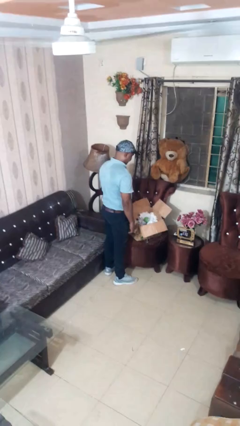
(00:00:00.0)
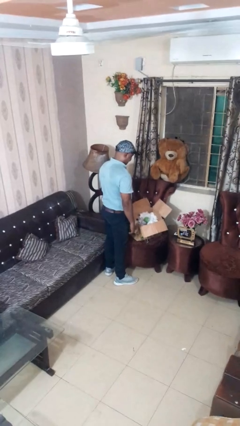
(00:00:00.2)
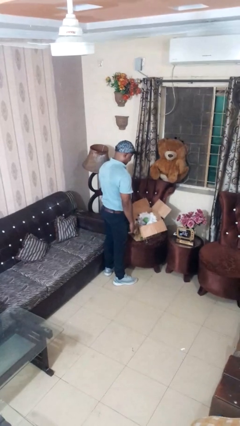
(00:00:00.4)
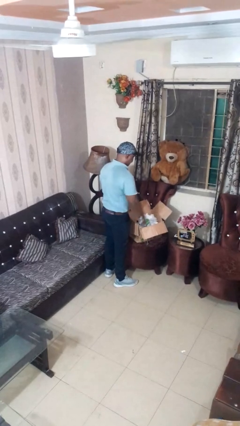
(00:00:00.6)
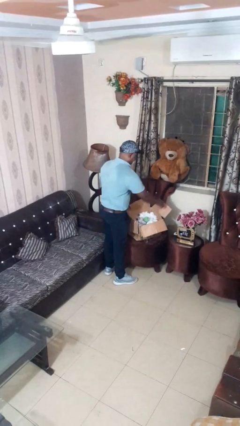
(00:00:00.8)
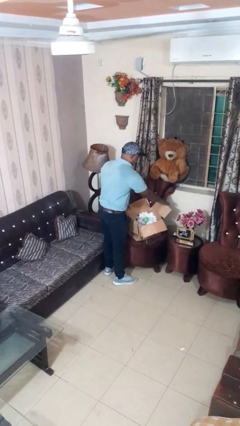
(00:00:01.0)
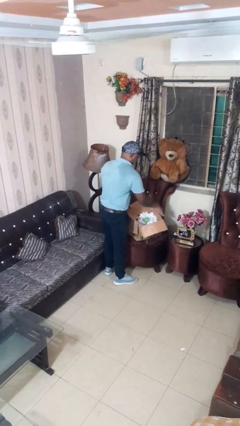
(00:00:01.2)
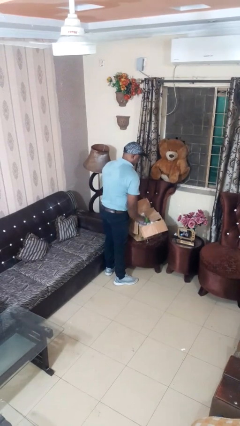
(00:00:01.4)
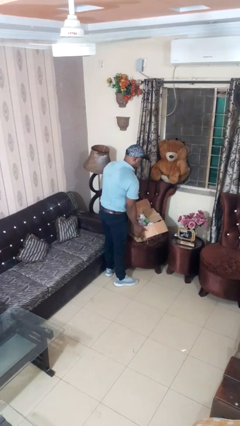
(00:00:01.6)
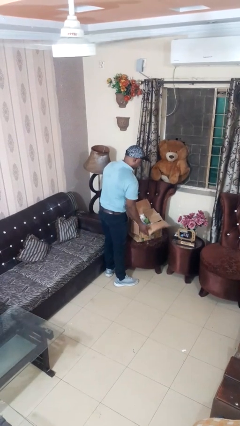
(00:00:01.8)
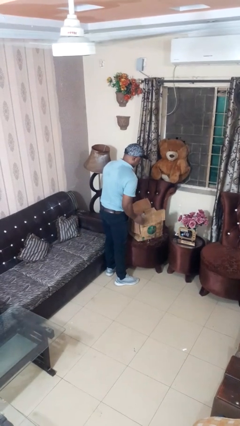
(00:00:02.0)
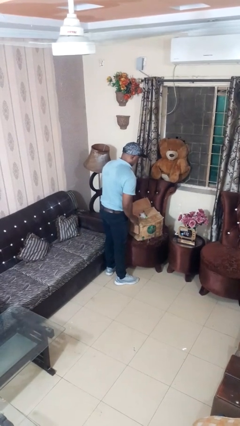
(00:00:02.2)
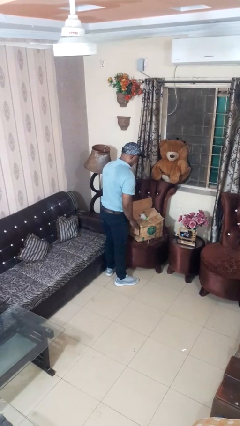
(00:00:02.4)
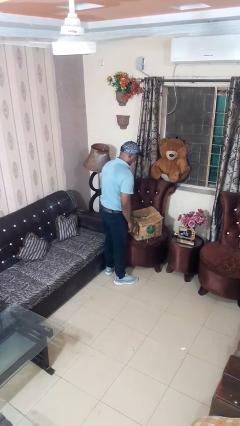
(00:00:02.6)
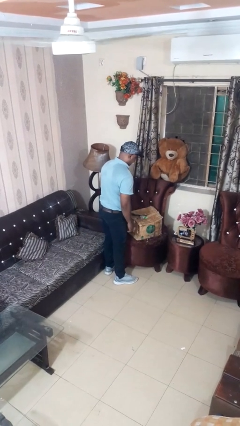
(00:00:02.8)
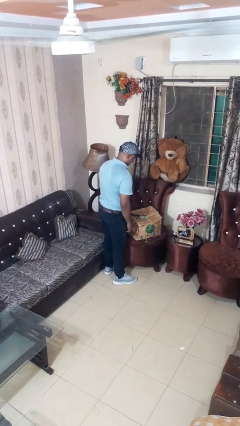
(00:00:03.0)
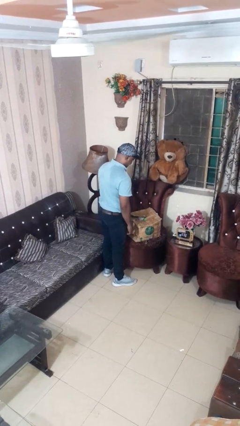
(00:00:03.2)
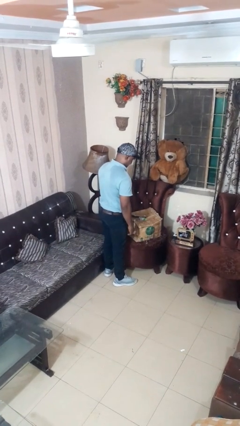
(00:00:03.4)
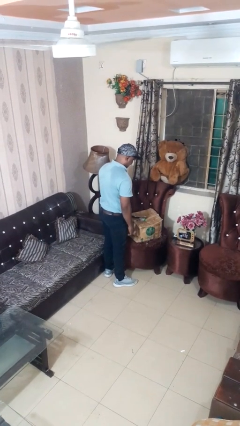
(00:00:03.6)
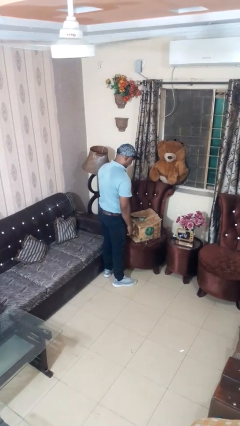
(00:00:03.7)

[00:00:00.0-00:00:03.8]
person closes box

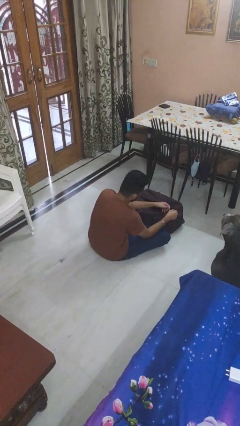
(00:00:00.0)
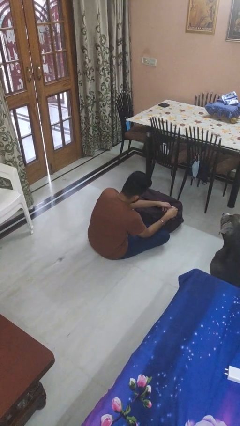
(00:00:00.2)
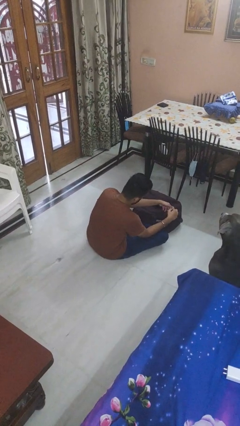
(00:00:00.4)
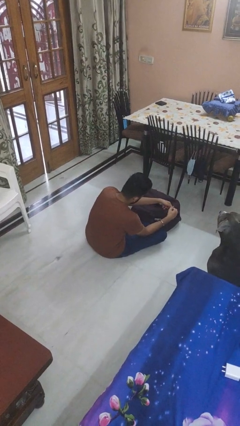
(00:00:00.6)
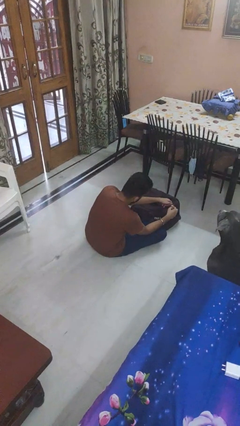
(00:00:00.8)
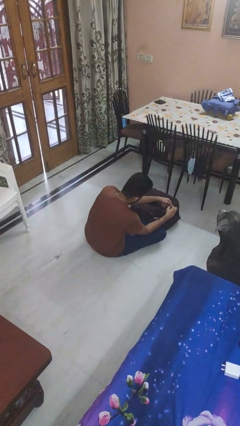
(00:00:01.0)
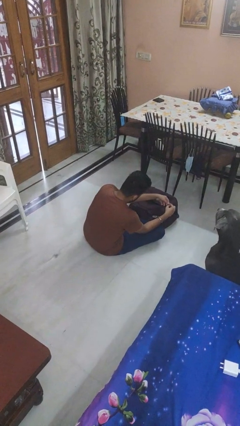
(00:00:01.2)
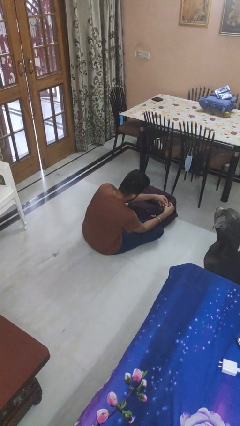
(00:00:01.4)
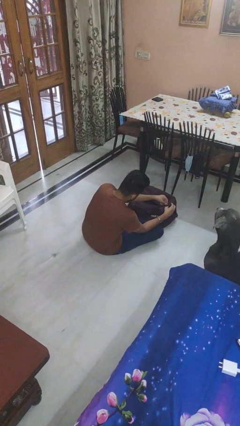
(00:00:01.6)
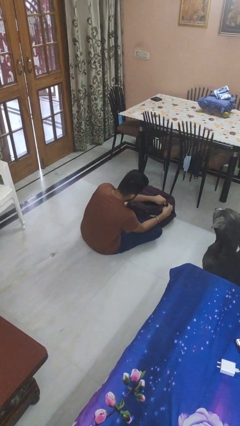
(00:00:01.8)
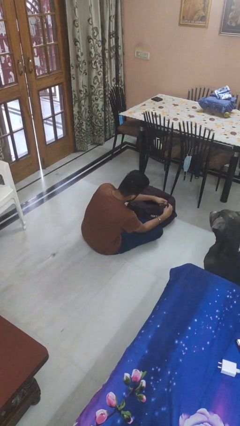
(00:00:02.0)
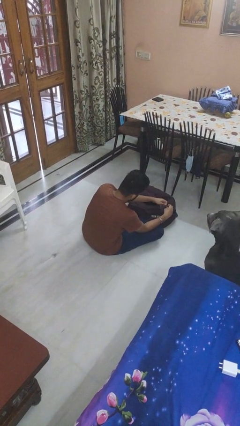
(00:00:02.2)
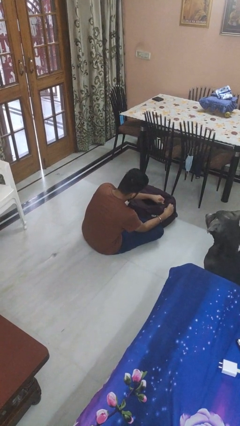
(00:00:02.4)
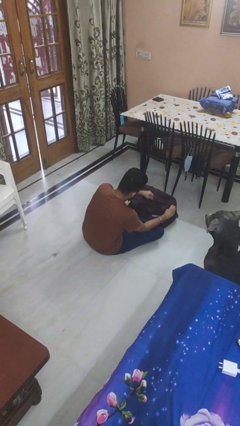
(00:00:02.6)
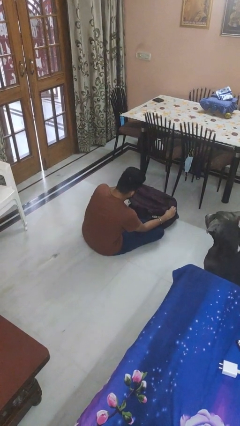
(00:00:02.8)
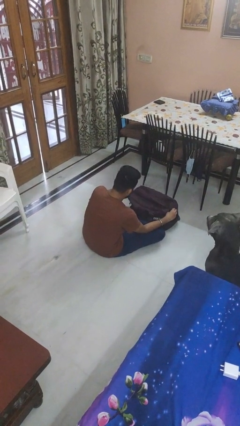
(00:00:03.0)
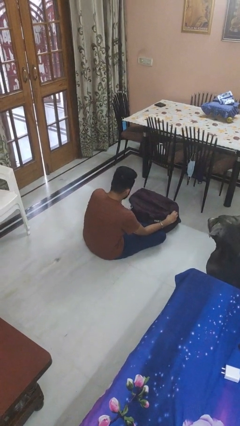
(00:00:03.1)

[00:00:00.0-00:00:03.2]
person closes suitcase

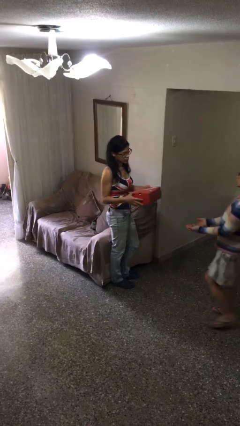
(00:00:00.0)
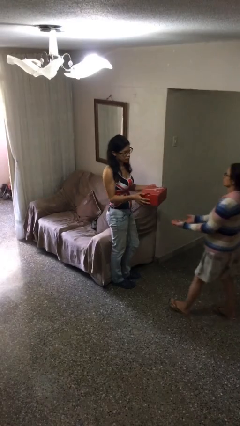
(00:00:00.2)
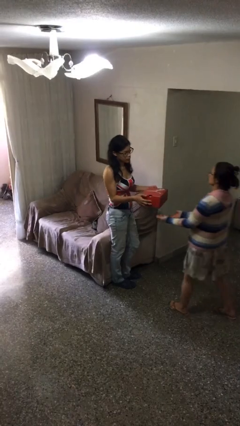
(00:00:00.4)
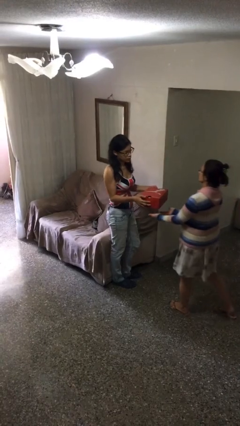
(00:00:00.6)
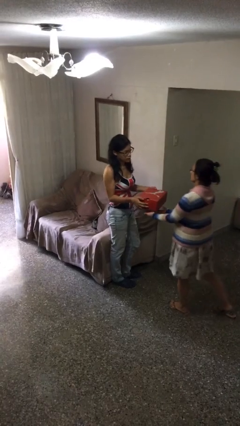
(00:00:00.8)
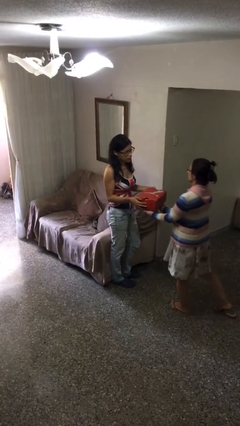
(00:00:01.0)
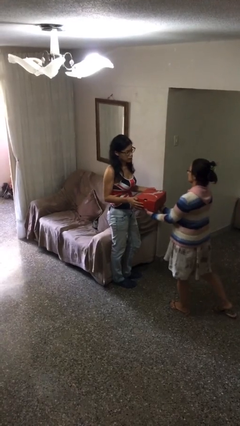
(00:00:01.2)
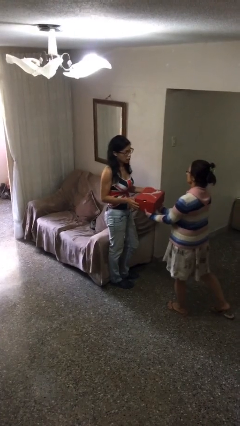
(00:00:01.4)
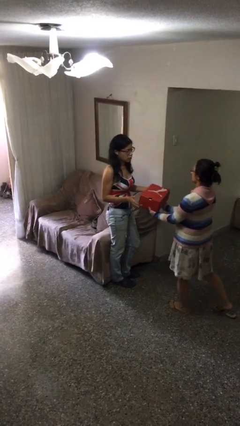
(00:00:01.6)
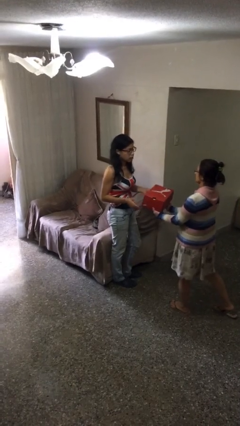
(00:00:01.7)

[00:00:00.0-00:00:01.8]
person transfers object to person

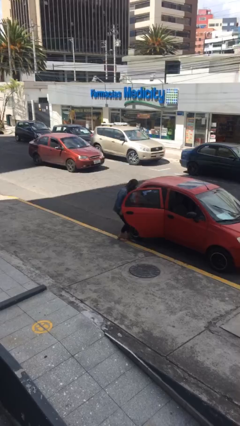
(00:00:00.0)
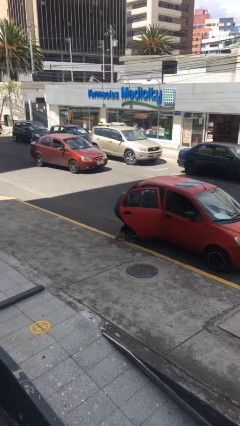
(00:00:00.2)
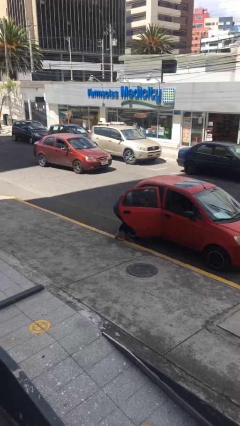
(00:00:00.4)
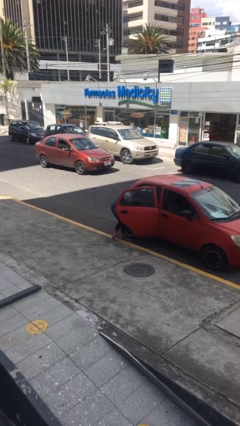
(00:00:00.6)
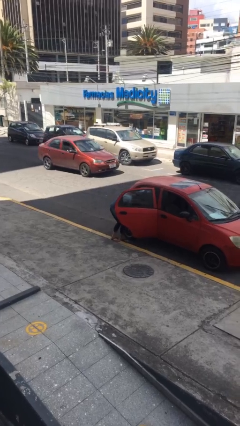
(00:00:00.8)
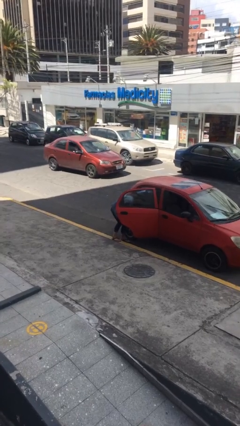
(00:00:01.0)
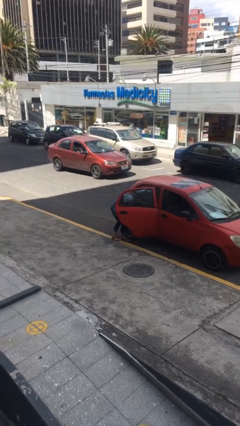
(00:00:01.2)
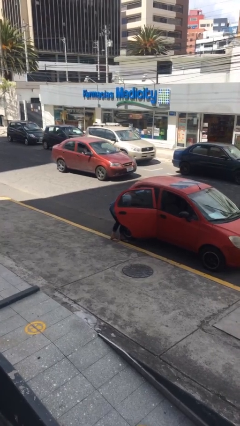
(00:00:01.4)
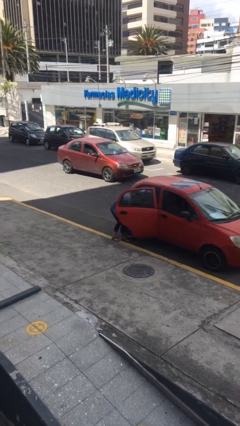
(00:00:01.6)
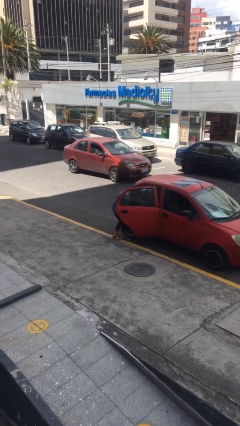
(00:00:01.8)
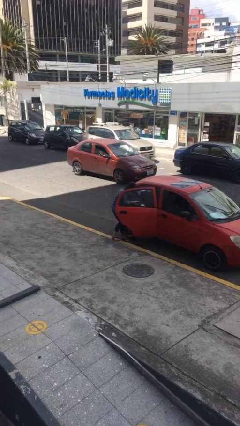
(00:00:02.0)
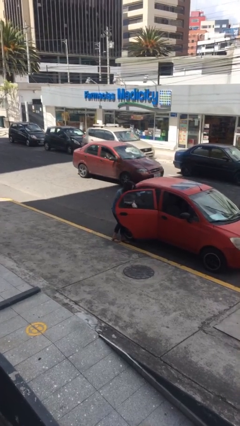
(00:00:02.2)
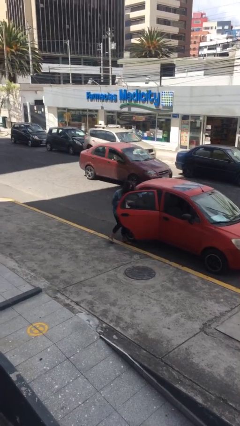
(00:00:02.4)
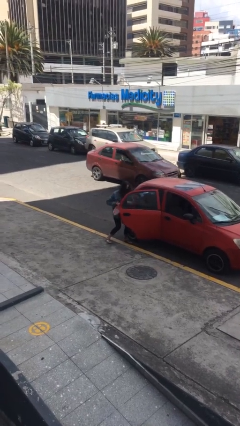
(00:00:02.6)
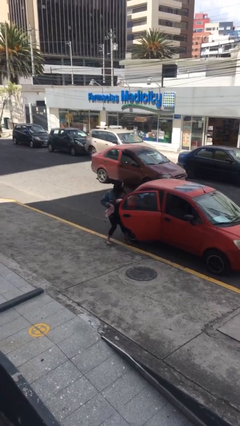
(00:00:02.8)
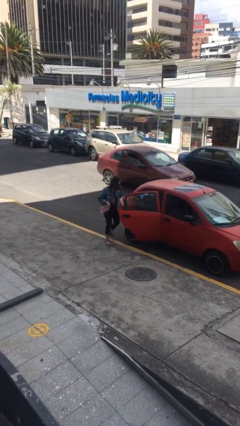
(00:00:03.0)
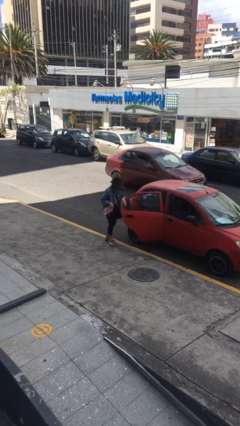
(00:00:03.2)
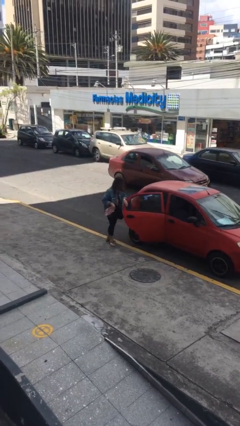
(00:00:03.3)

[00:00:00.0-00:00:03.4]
person unloads car

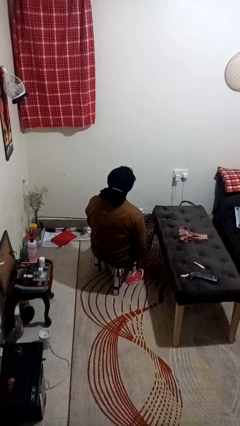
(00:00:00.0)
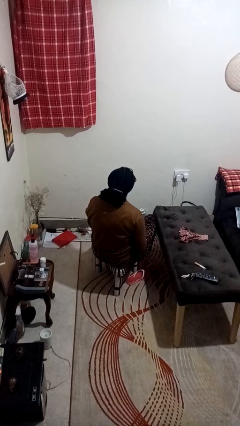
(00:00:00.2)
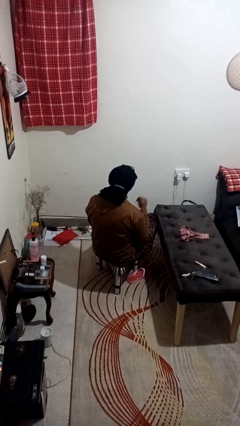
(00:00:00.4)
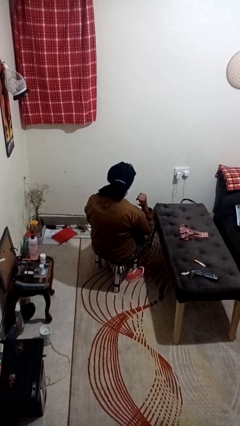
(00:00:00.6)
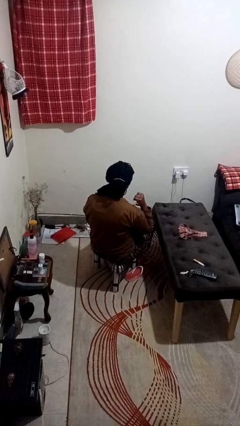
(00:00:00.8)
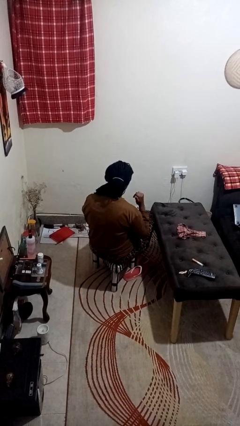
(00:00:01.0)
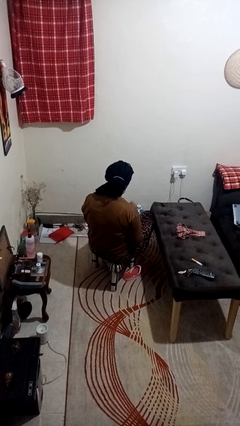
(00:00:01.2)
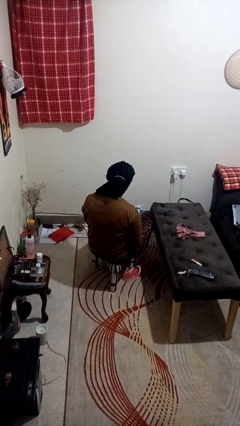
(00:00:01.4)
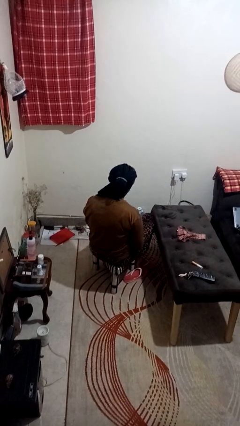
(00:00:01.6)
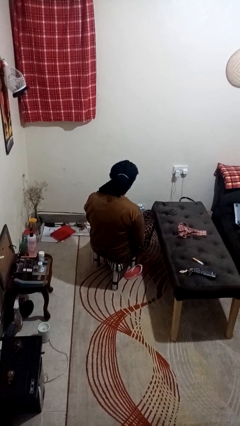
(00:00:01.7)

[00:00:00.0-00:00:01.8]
person gestures behind me

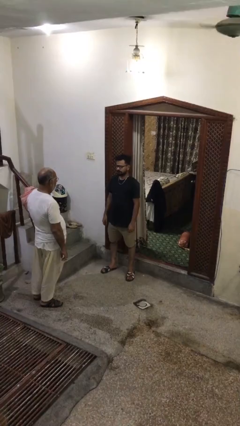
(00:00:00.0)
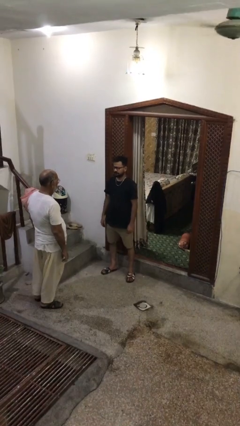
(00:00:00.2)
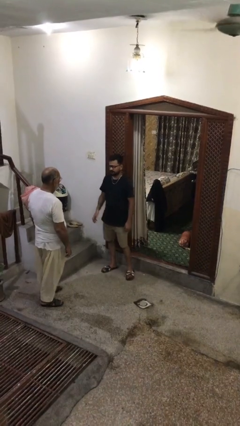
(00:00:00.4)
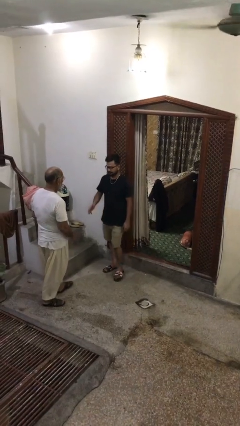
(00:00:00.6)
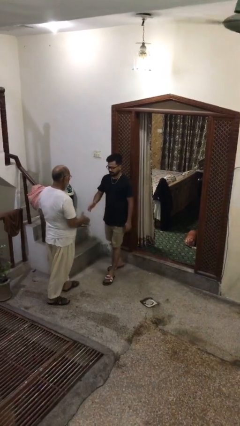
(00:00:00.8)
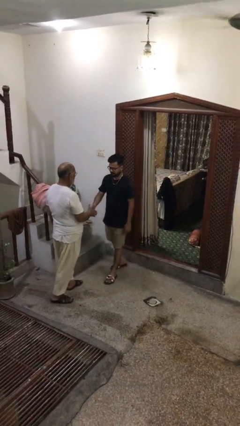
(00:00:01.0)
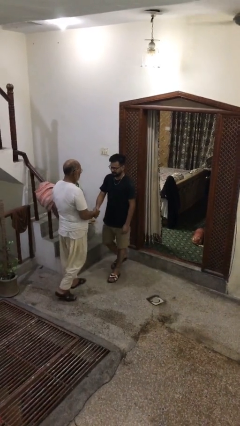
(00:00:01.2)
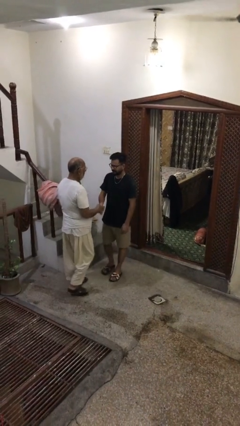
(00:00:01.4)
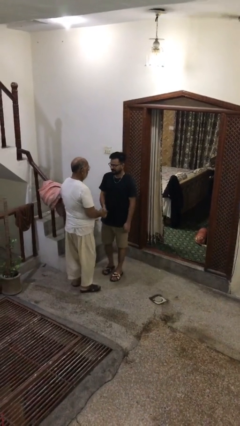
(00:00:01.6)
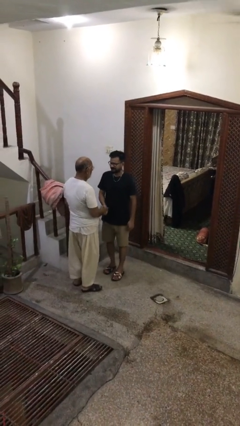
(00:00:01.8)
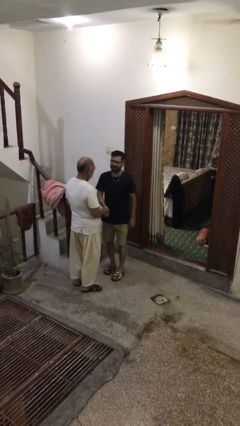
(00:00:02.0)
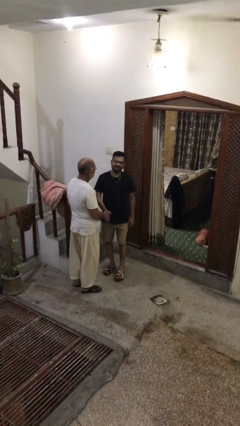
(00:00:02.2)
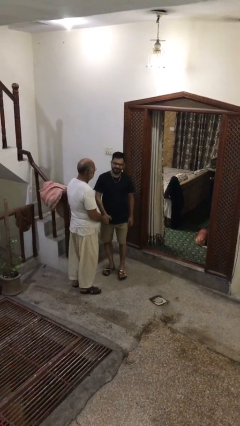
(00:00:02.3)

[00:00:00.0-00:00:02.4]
person shakes hand

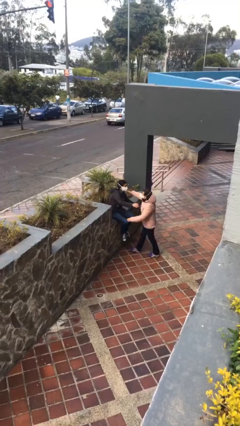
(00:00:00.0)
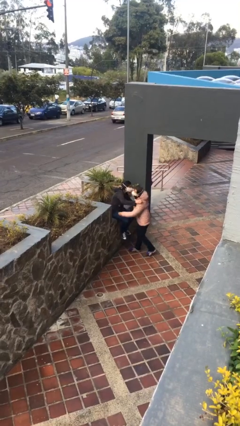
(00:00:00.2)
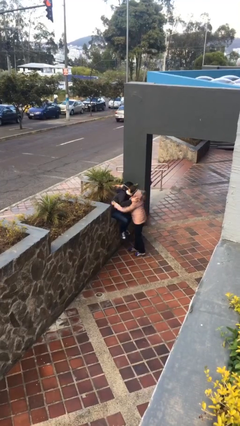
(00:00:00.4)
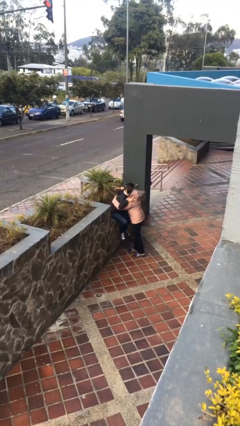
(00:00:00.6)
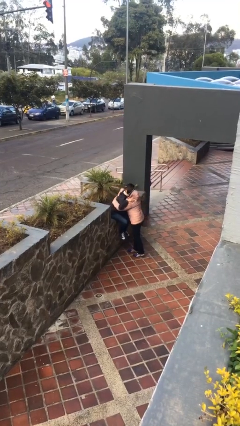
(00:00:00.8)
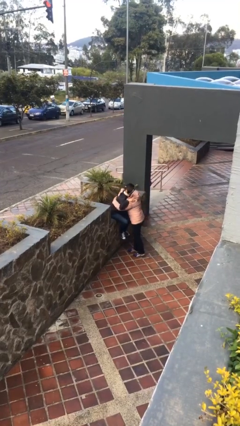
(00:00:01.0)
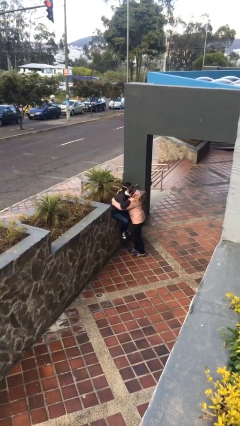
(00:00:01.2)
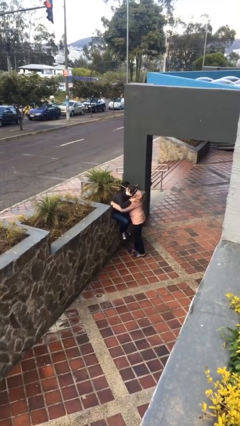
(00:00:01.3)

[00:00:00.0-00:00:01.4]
person embraces person
